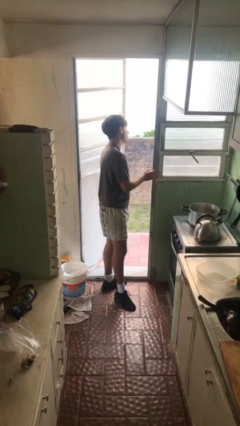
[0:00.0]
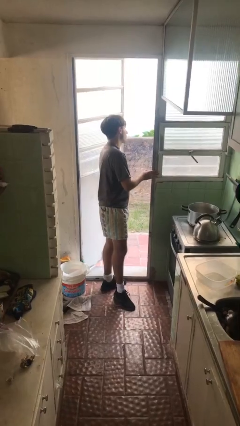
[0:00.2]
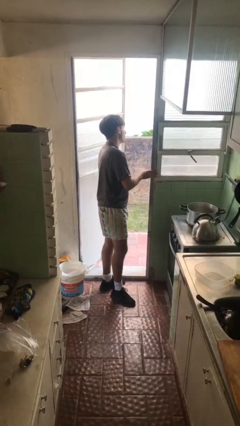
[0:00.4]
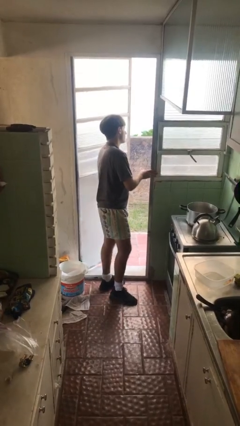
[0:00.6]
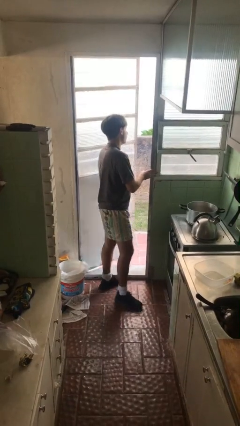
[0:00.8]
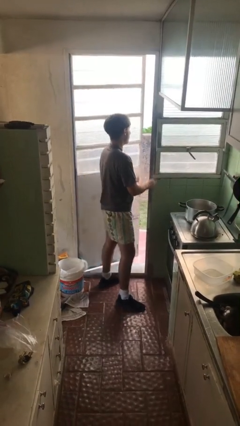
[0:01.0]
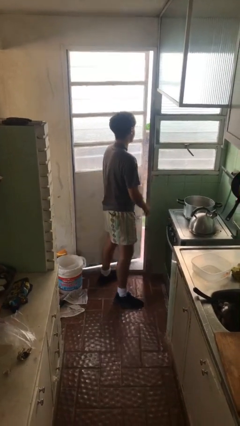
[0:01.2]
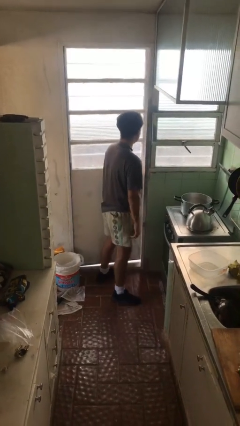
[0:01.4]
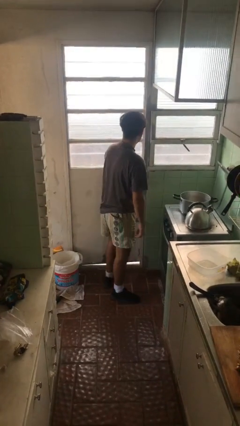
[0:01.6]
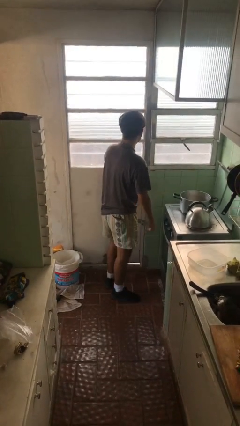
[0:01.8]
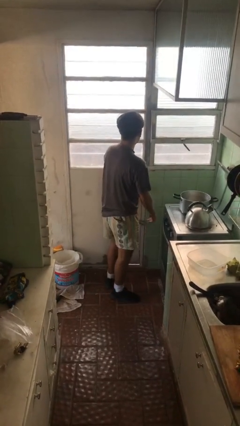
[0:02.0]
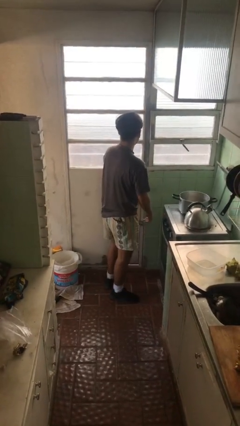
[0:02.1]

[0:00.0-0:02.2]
person closes facility door

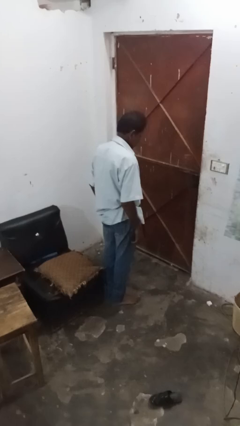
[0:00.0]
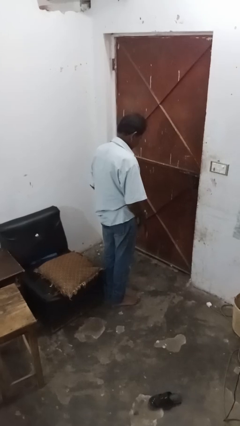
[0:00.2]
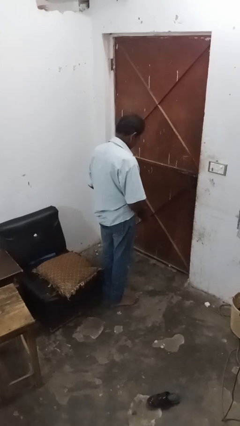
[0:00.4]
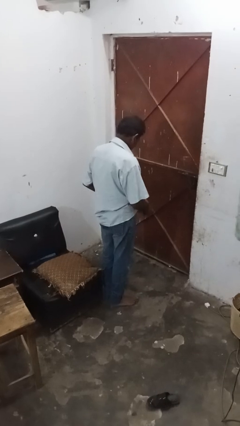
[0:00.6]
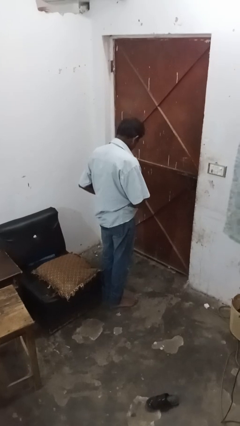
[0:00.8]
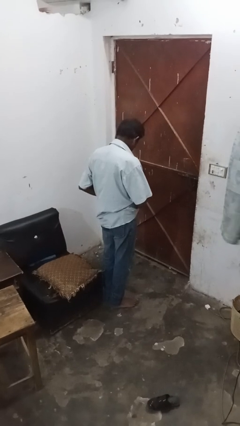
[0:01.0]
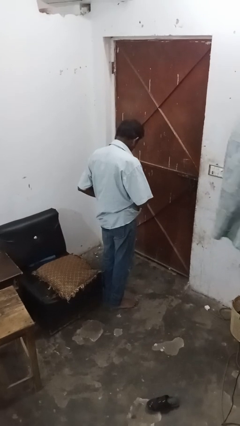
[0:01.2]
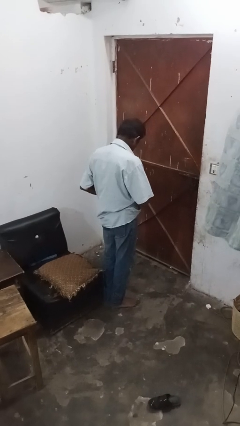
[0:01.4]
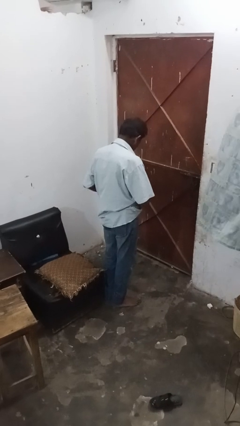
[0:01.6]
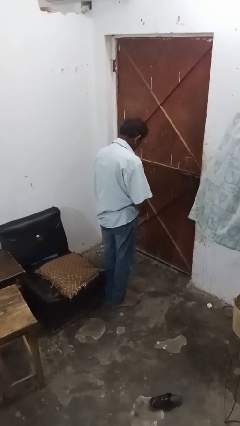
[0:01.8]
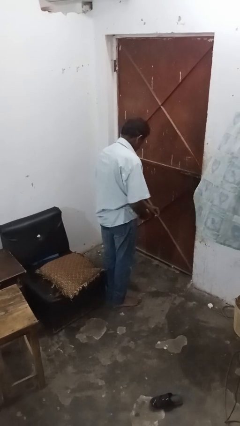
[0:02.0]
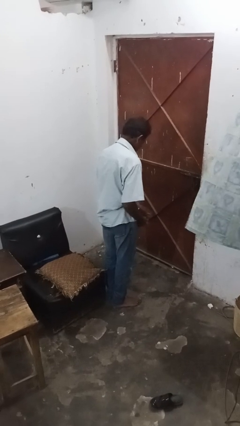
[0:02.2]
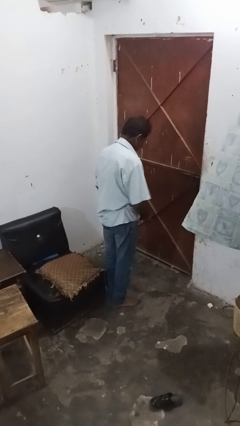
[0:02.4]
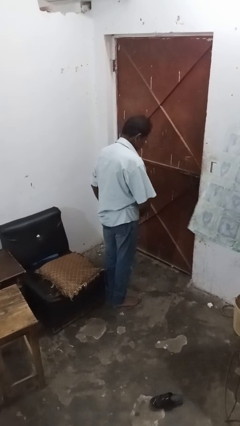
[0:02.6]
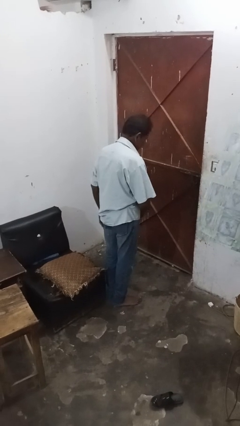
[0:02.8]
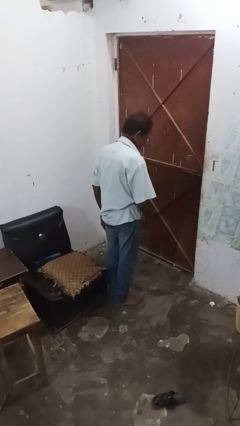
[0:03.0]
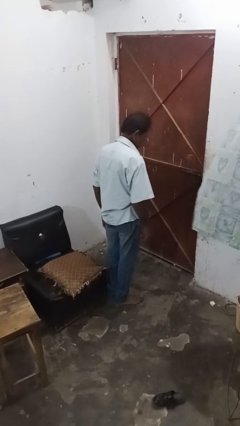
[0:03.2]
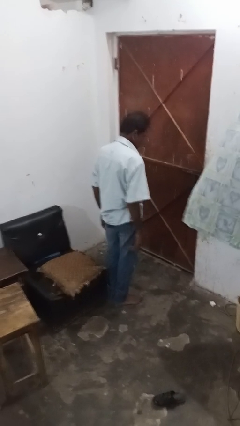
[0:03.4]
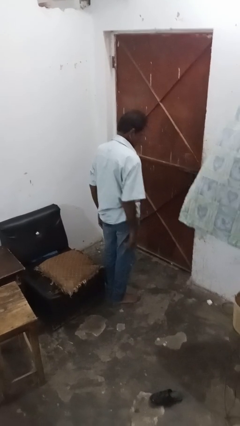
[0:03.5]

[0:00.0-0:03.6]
person puts on belt

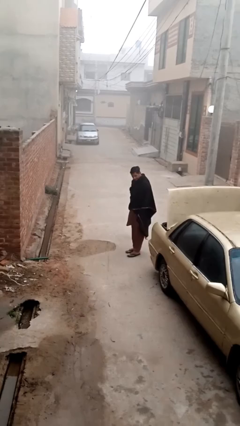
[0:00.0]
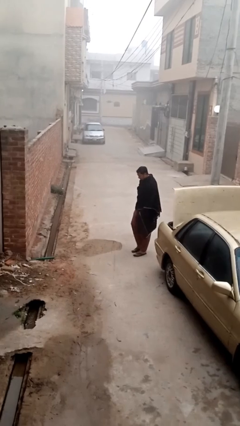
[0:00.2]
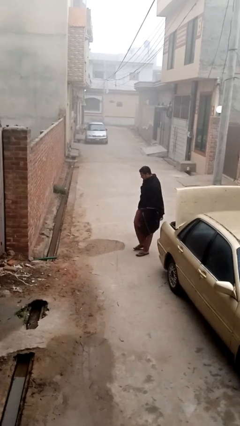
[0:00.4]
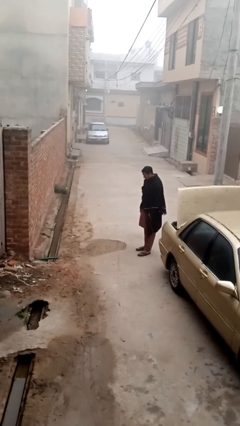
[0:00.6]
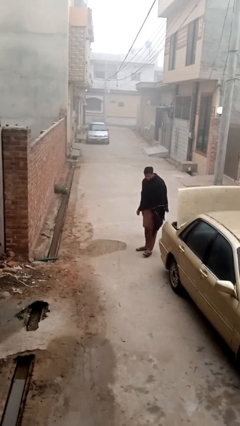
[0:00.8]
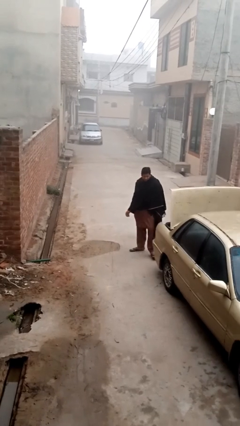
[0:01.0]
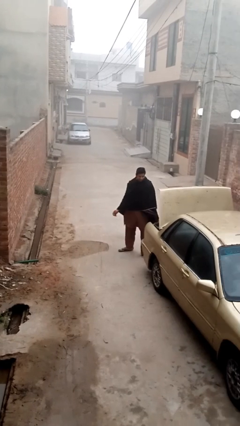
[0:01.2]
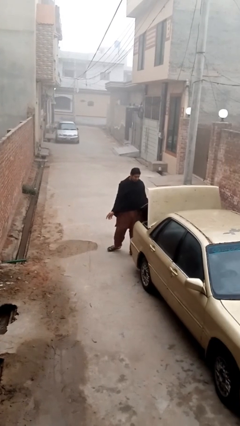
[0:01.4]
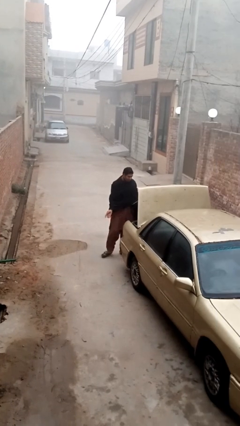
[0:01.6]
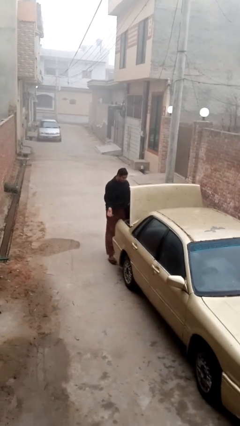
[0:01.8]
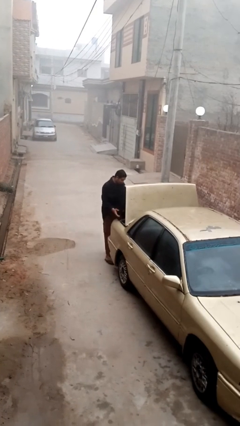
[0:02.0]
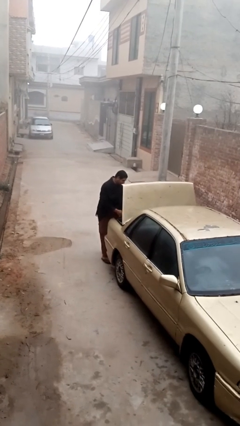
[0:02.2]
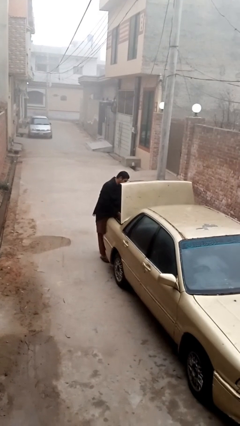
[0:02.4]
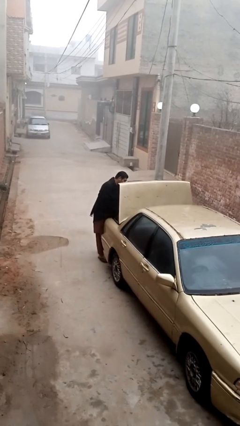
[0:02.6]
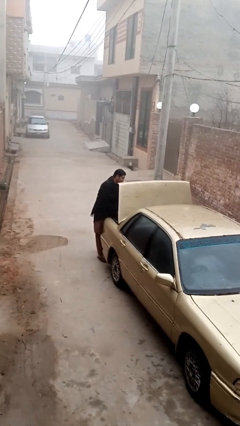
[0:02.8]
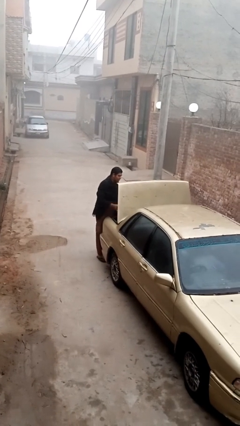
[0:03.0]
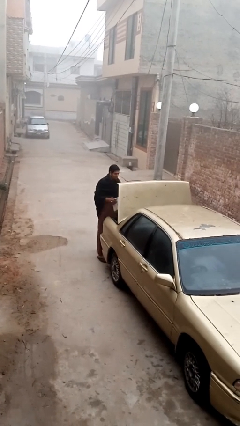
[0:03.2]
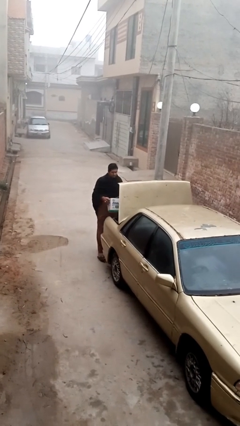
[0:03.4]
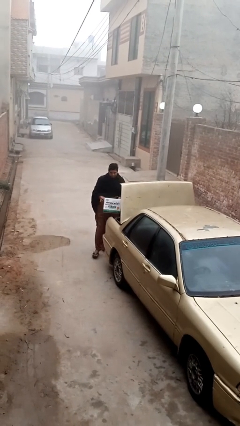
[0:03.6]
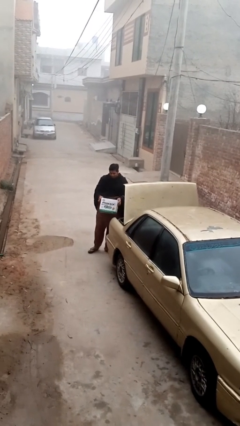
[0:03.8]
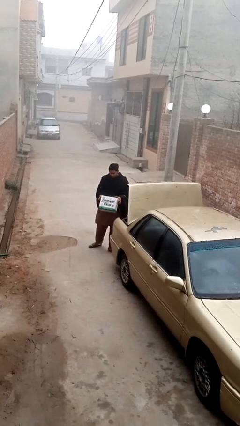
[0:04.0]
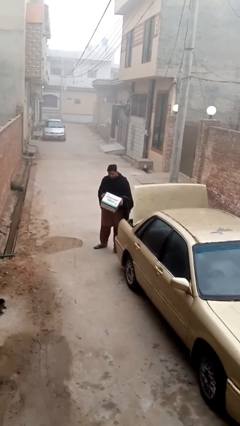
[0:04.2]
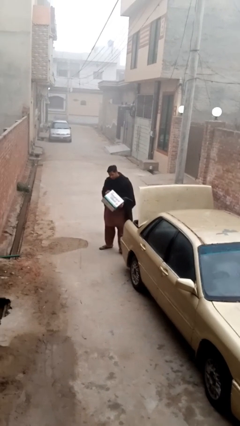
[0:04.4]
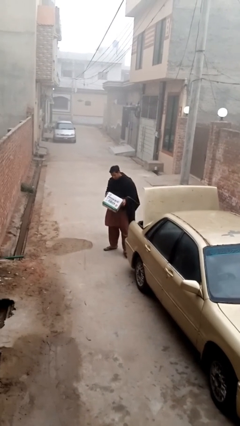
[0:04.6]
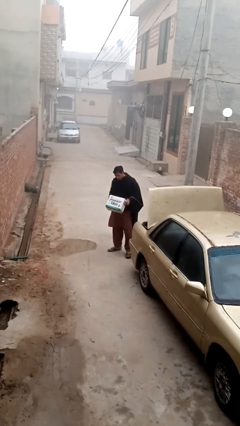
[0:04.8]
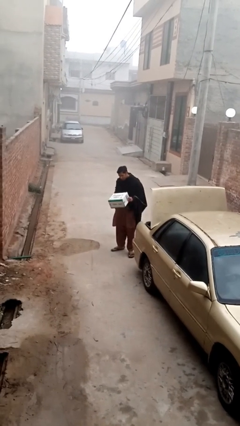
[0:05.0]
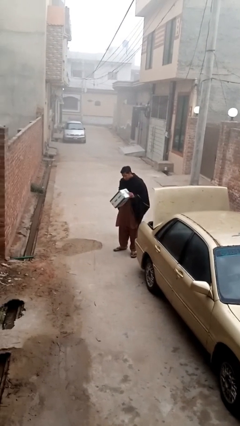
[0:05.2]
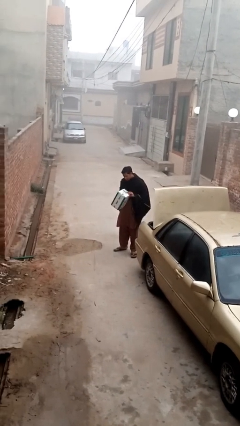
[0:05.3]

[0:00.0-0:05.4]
person unloads car

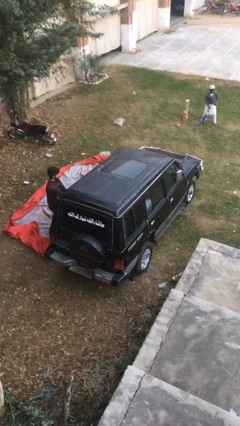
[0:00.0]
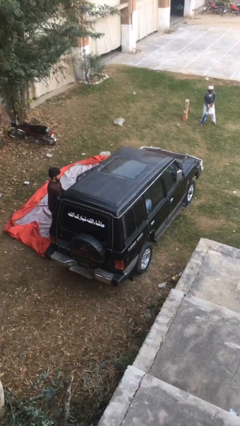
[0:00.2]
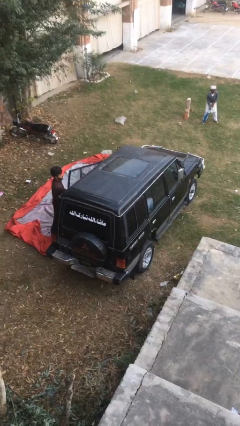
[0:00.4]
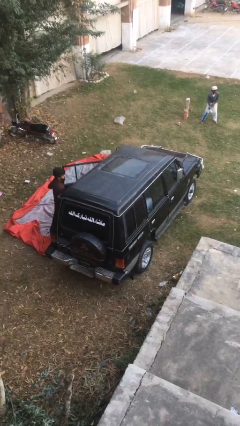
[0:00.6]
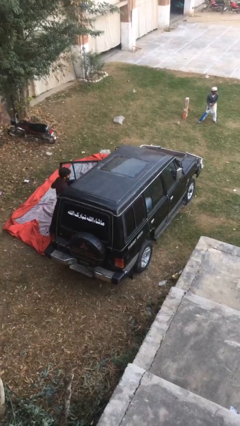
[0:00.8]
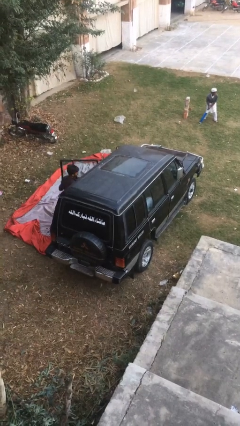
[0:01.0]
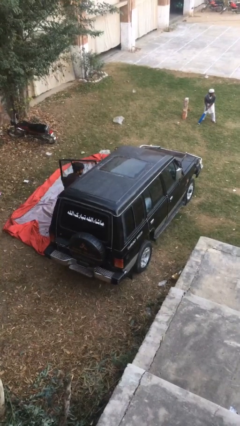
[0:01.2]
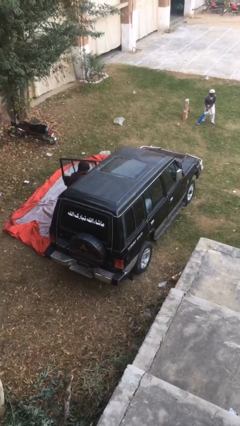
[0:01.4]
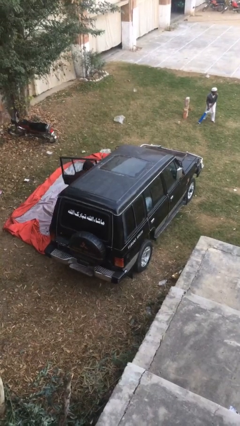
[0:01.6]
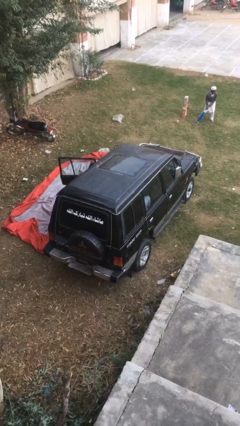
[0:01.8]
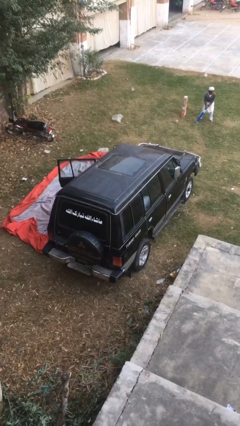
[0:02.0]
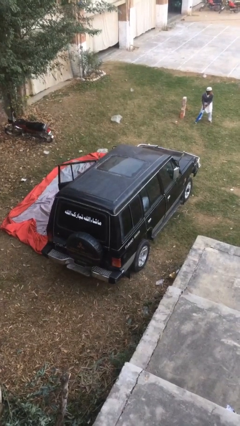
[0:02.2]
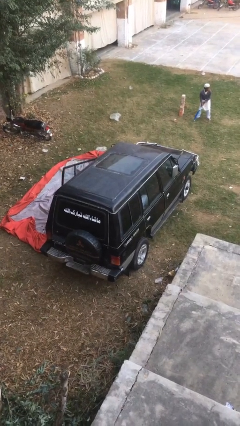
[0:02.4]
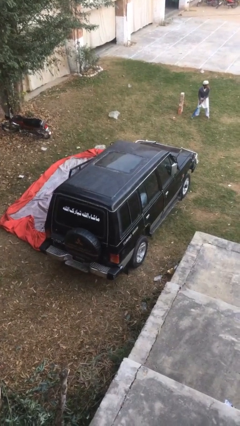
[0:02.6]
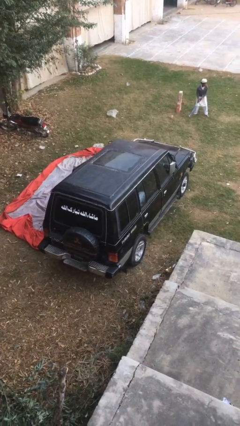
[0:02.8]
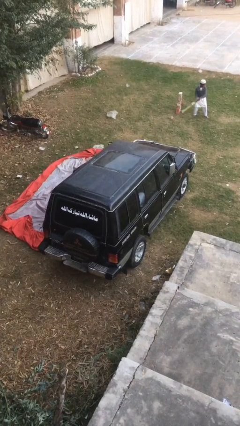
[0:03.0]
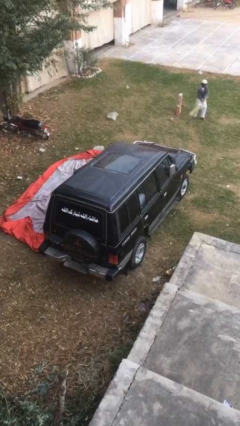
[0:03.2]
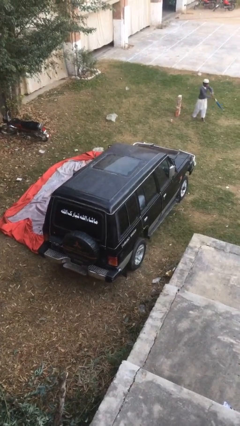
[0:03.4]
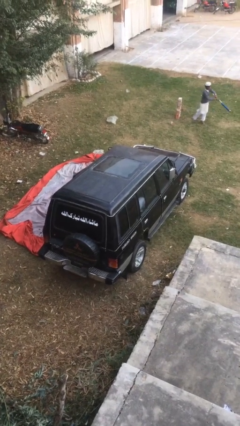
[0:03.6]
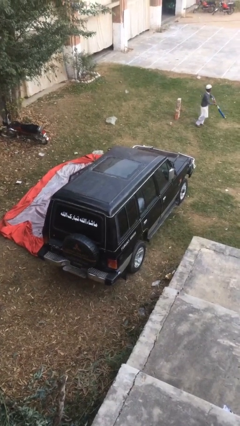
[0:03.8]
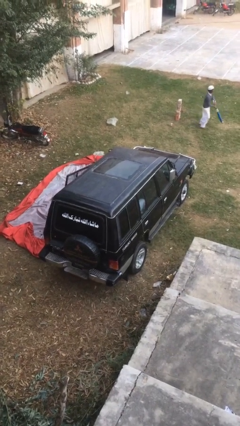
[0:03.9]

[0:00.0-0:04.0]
car picks up person

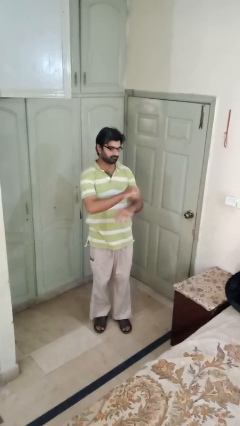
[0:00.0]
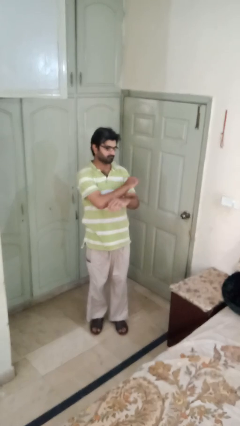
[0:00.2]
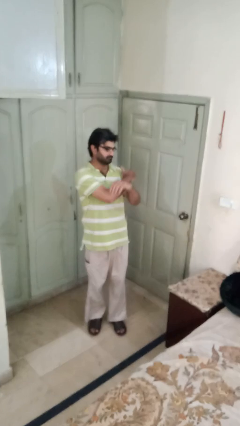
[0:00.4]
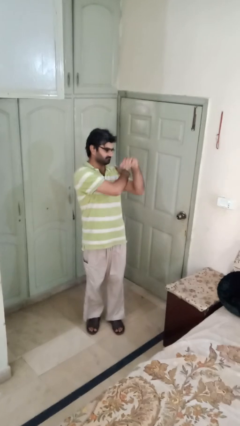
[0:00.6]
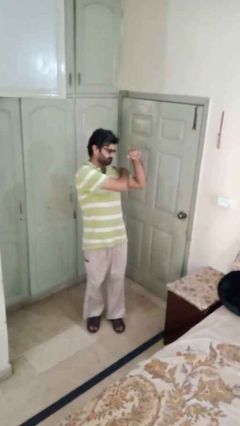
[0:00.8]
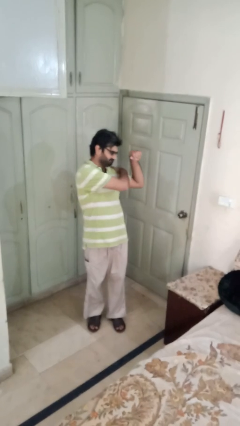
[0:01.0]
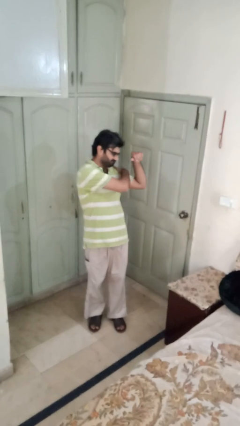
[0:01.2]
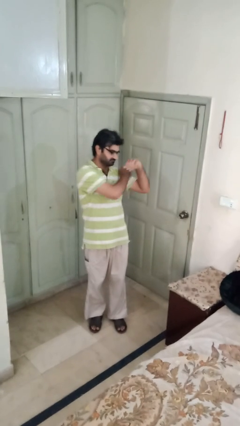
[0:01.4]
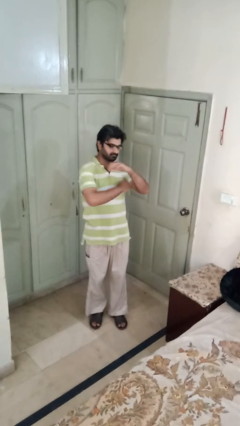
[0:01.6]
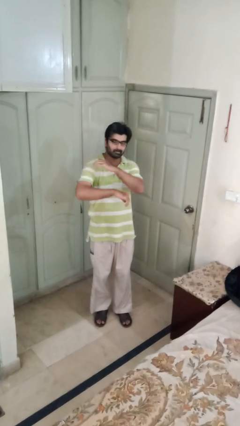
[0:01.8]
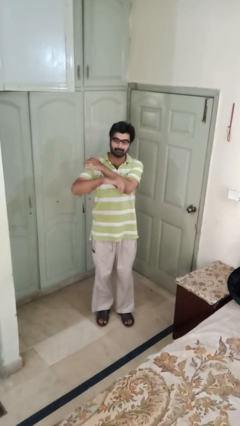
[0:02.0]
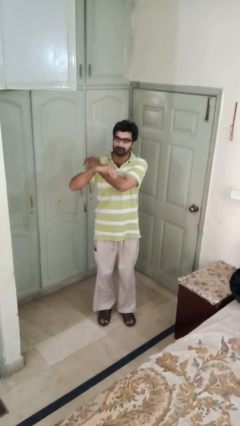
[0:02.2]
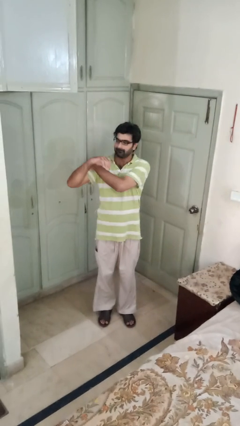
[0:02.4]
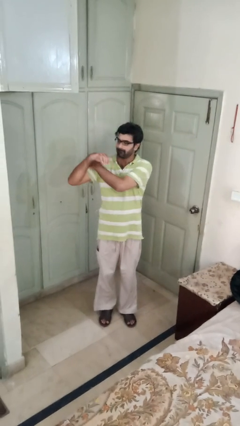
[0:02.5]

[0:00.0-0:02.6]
person stretches arms to side
